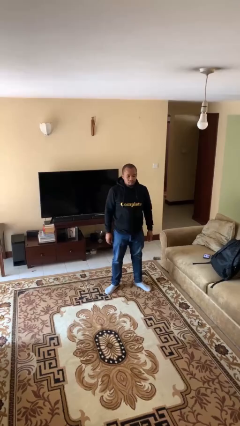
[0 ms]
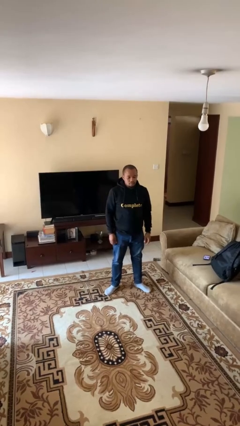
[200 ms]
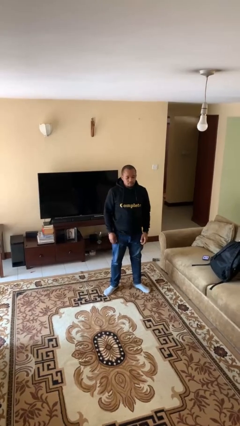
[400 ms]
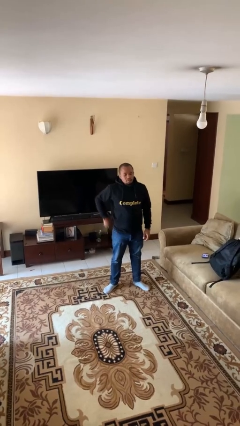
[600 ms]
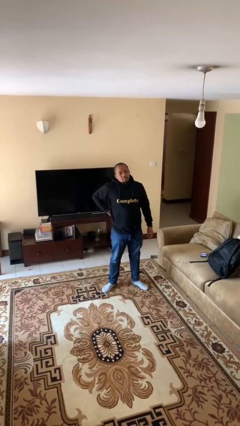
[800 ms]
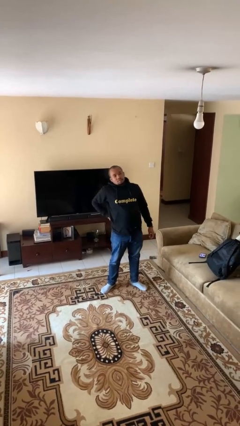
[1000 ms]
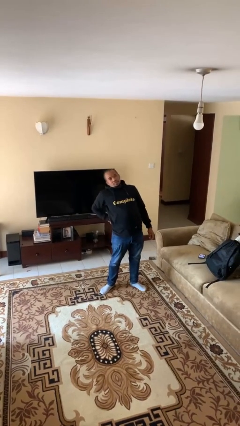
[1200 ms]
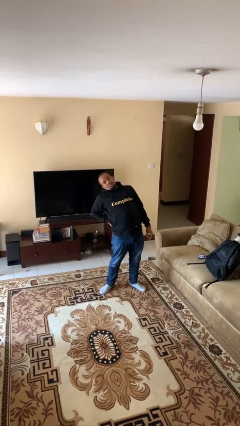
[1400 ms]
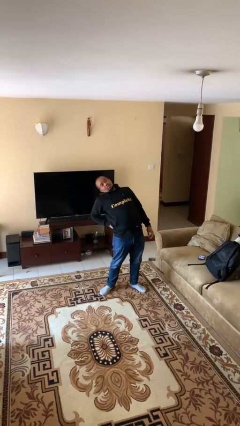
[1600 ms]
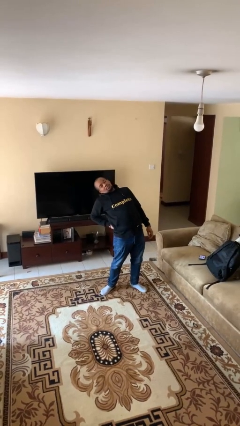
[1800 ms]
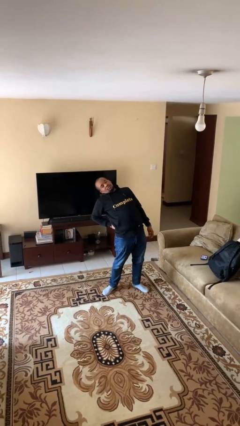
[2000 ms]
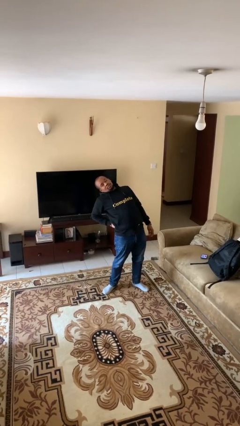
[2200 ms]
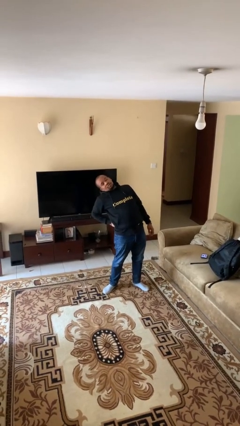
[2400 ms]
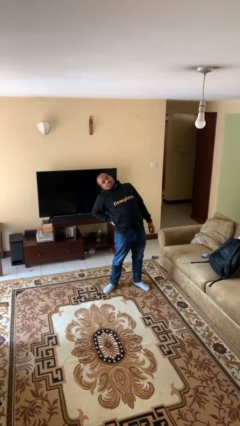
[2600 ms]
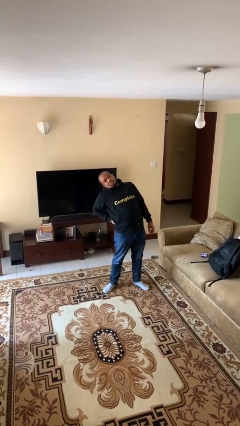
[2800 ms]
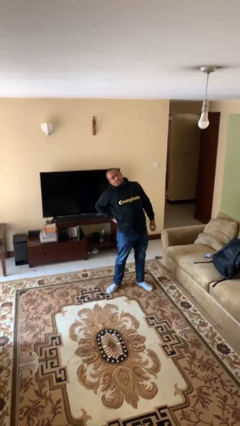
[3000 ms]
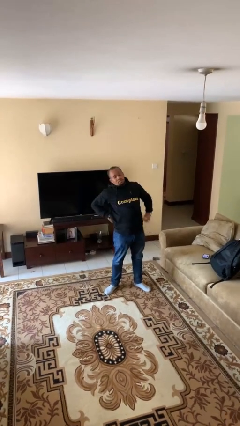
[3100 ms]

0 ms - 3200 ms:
person stretches back

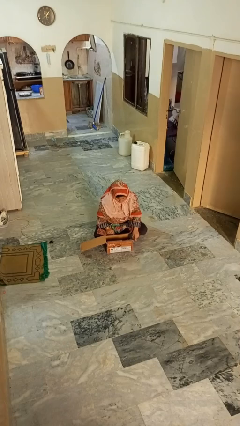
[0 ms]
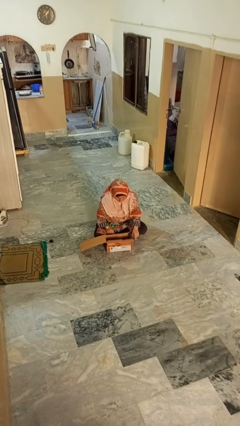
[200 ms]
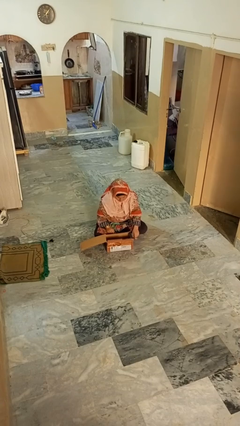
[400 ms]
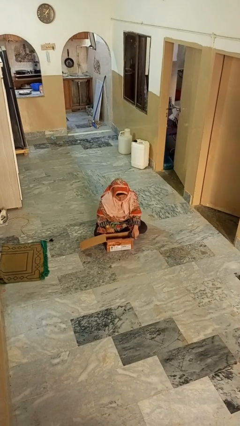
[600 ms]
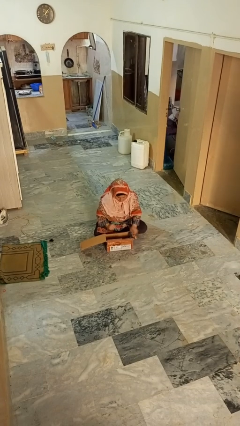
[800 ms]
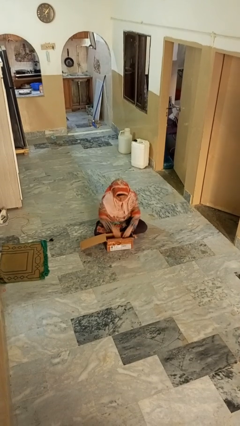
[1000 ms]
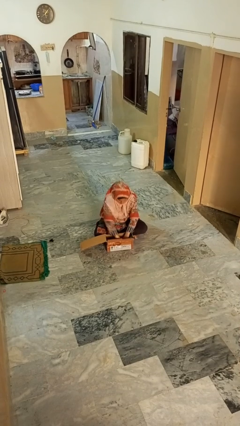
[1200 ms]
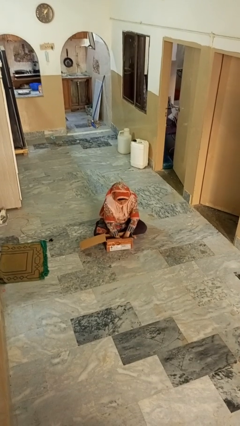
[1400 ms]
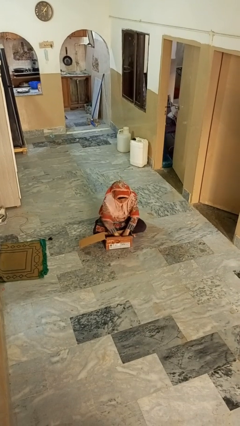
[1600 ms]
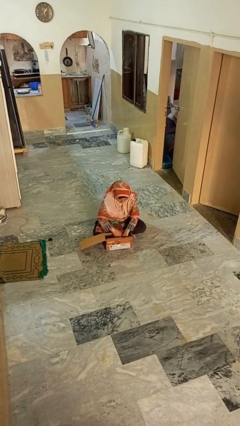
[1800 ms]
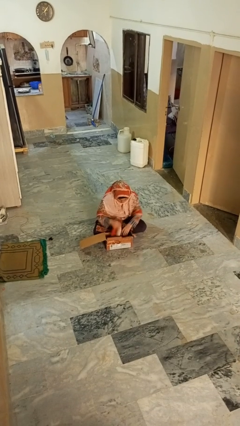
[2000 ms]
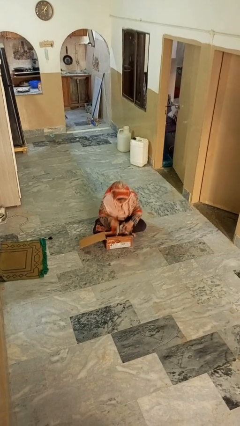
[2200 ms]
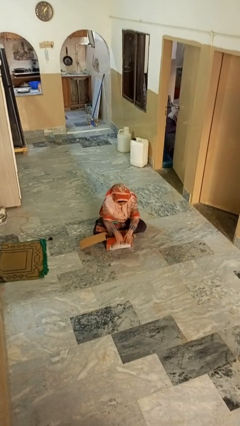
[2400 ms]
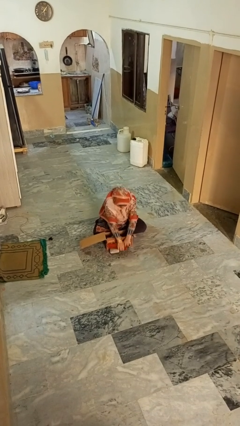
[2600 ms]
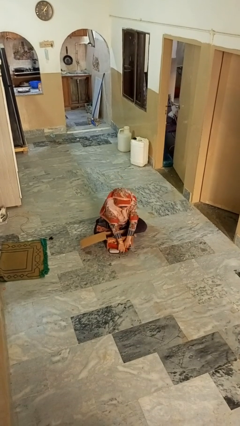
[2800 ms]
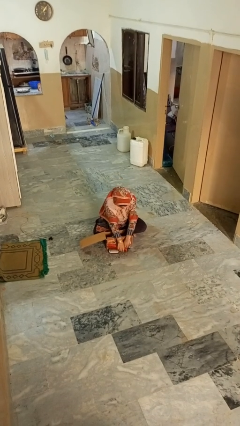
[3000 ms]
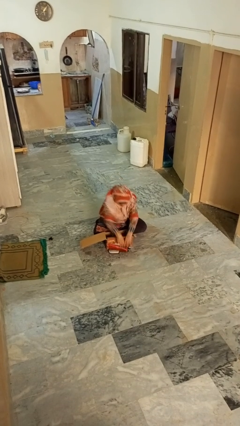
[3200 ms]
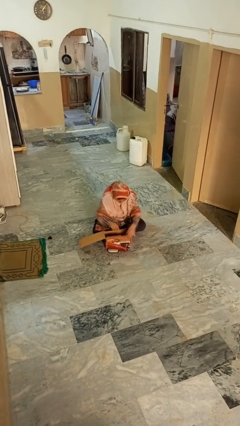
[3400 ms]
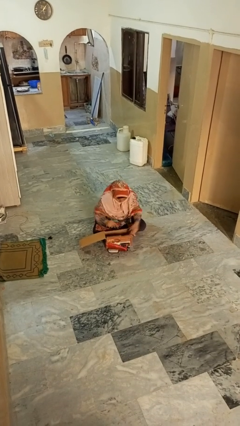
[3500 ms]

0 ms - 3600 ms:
person takes object from box

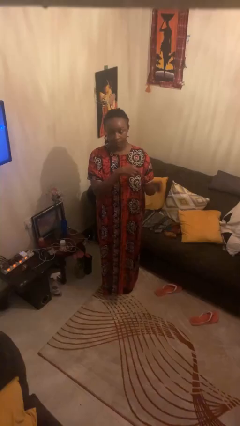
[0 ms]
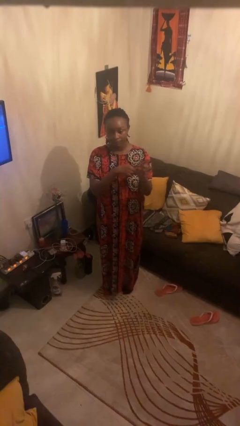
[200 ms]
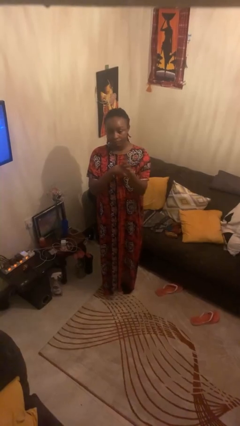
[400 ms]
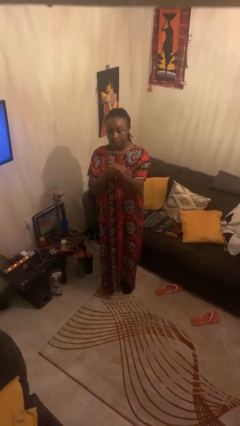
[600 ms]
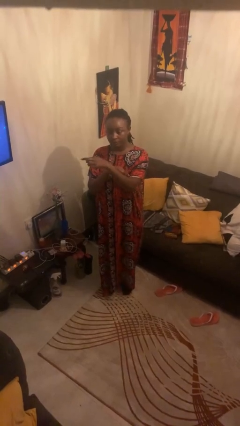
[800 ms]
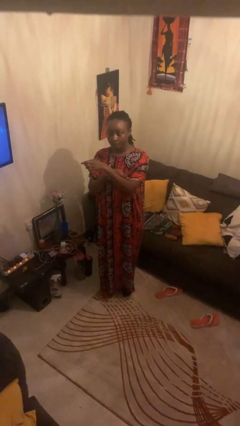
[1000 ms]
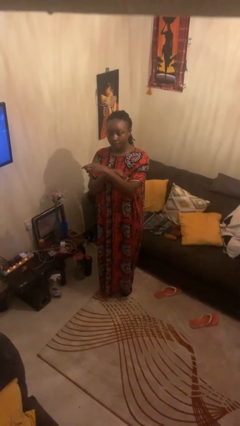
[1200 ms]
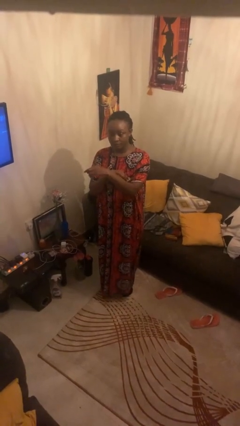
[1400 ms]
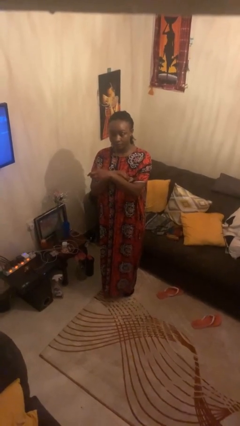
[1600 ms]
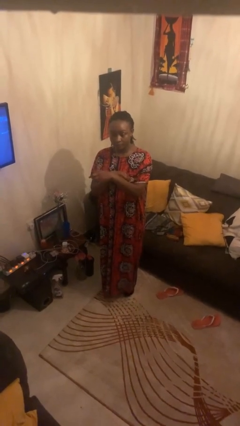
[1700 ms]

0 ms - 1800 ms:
person gestures swipe right

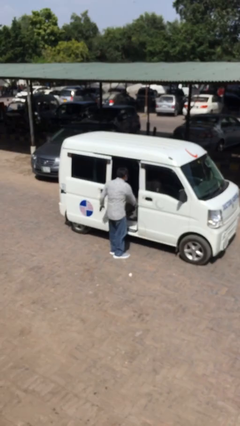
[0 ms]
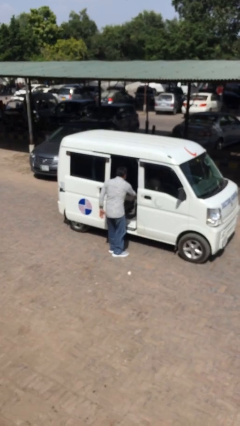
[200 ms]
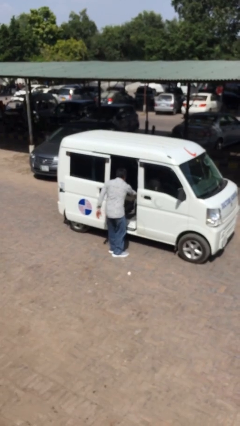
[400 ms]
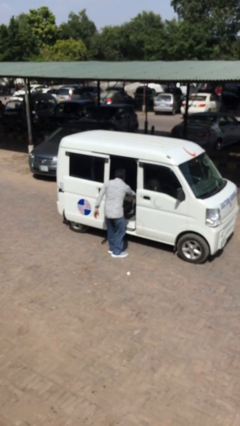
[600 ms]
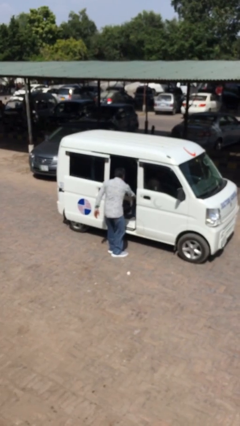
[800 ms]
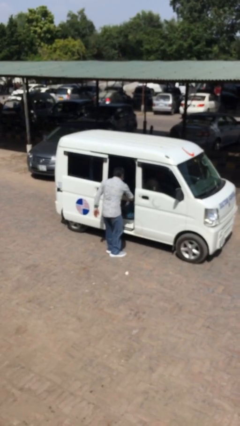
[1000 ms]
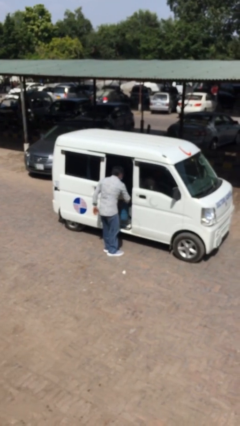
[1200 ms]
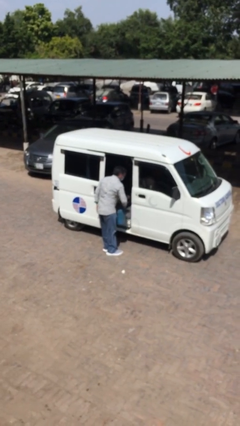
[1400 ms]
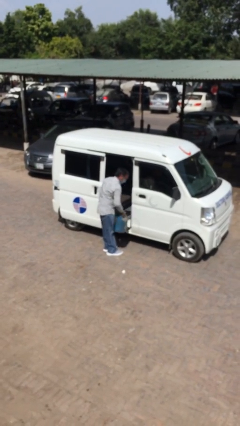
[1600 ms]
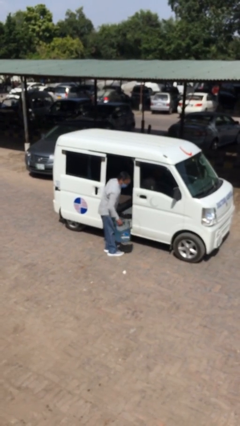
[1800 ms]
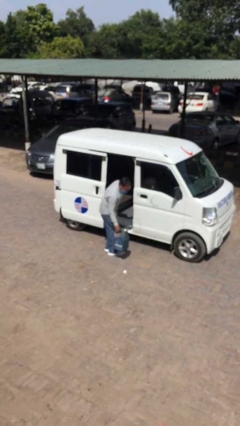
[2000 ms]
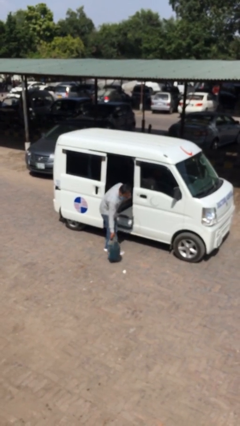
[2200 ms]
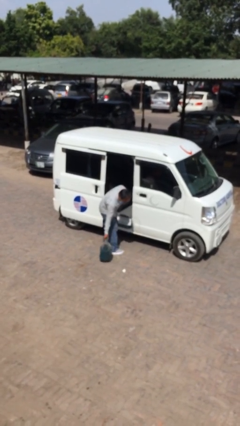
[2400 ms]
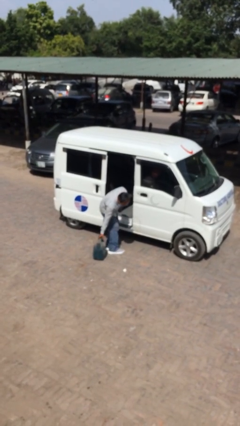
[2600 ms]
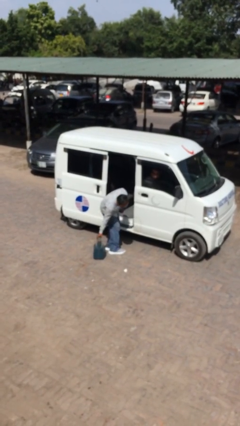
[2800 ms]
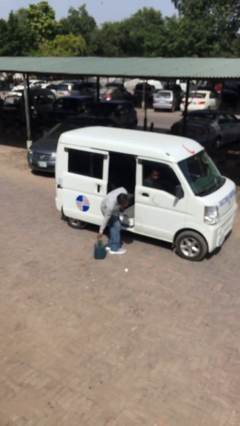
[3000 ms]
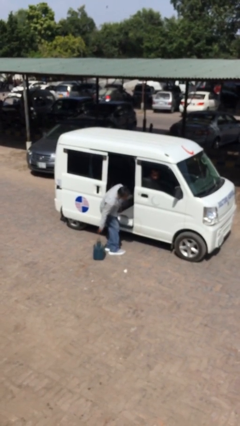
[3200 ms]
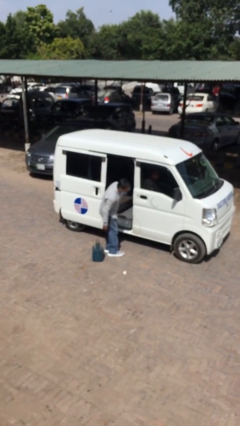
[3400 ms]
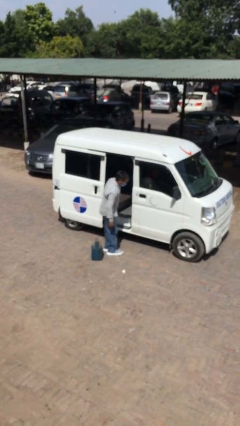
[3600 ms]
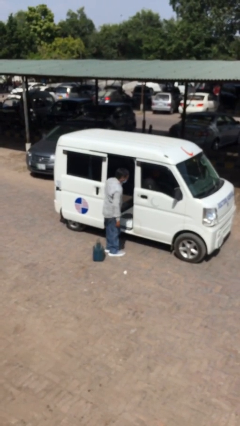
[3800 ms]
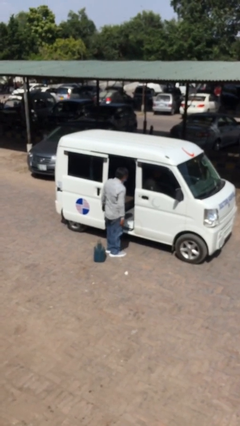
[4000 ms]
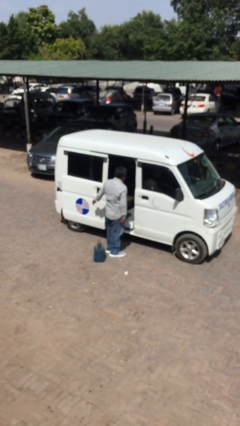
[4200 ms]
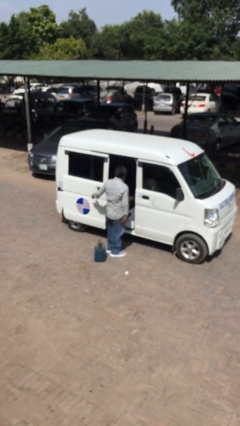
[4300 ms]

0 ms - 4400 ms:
person unloads car

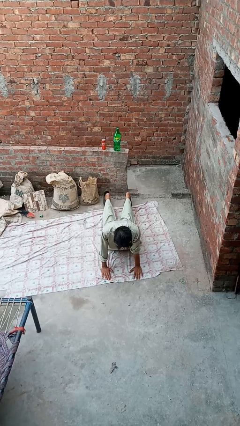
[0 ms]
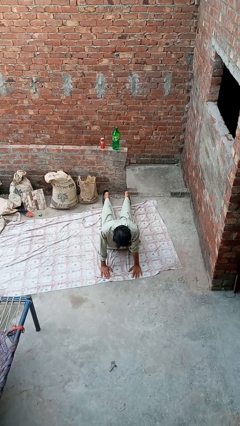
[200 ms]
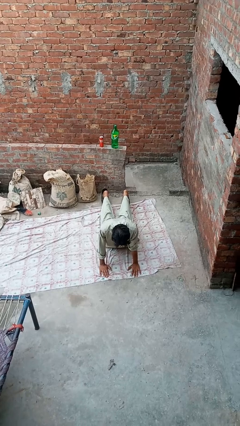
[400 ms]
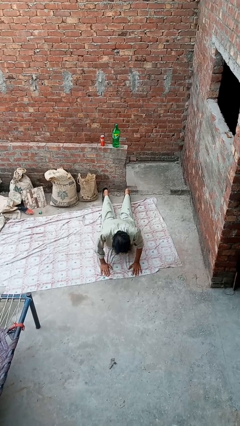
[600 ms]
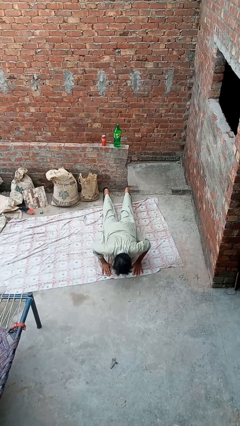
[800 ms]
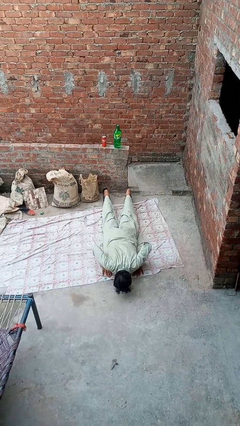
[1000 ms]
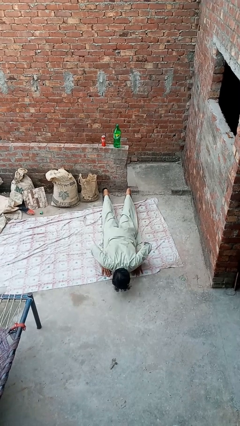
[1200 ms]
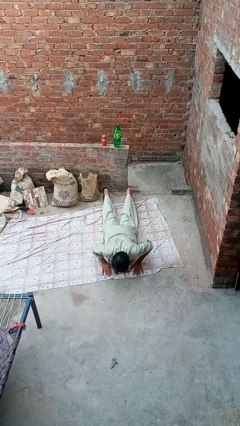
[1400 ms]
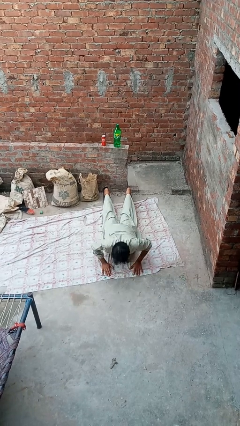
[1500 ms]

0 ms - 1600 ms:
person exercises with pushup

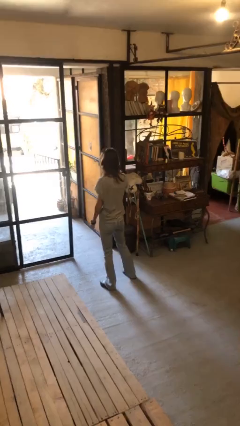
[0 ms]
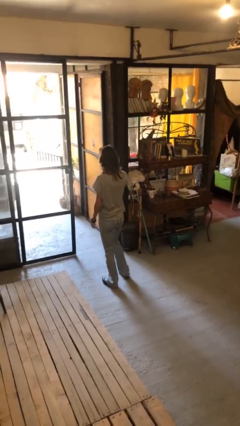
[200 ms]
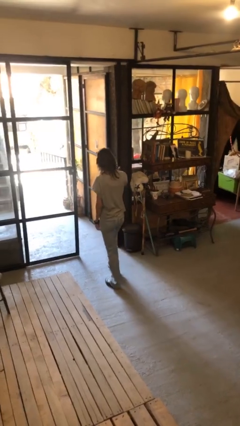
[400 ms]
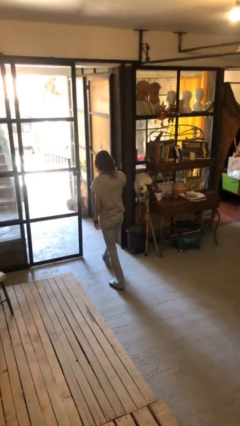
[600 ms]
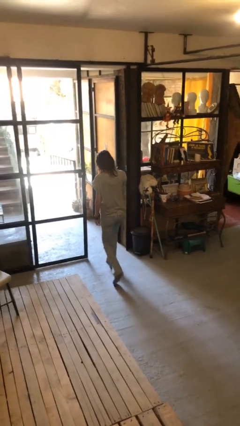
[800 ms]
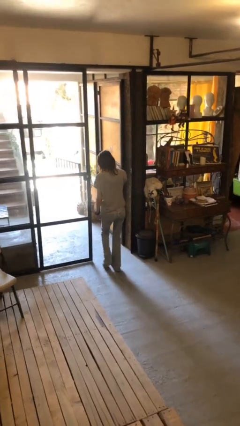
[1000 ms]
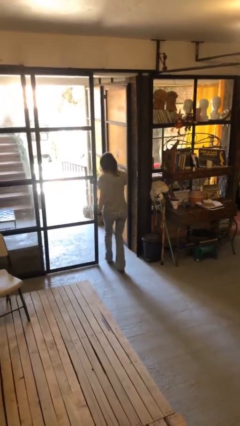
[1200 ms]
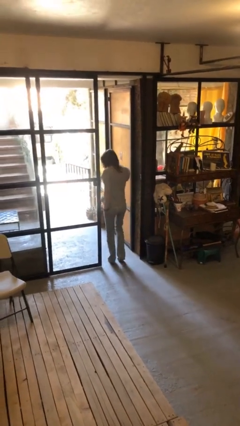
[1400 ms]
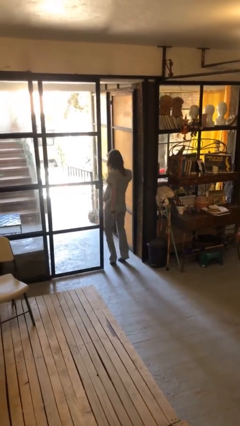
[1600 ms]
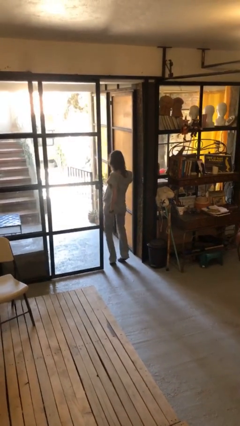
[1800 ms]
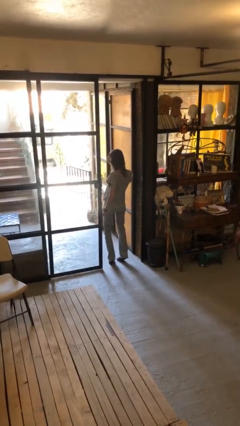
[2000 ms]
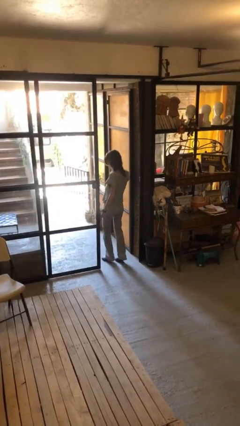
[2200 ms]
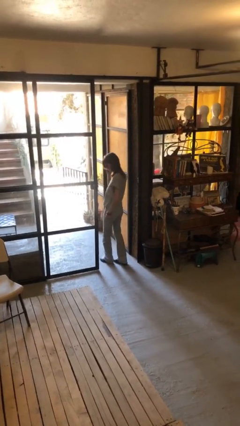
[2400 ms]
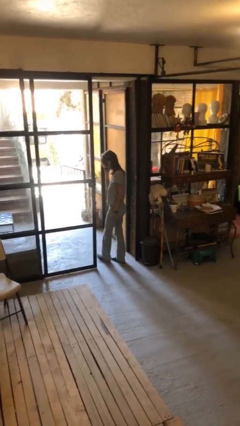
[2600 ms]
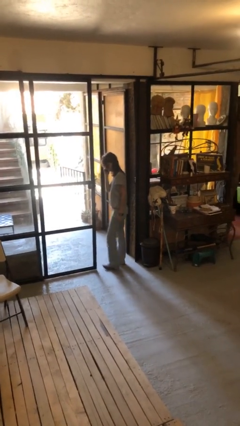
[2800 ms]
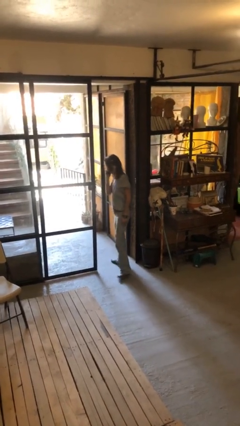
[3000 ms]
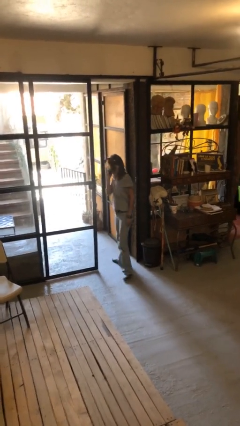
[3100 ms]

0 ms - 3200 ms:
person bumps into wall
